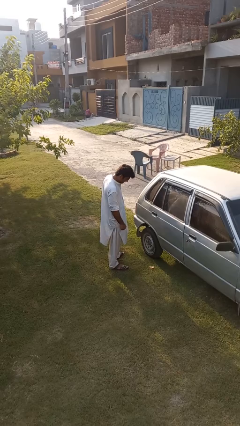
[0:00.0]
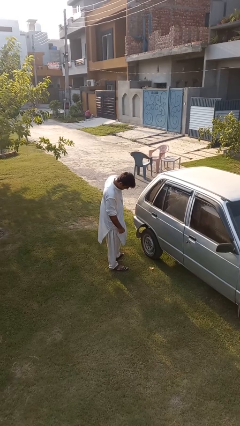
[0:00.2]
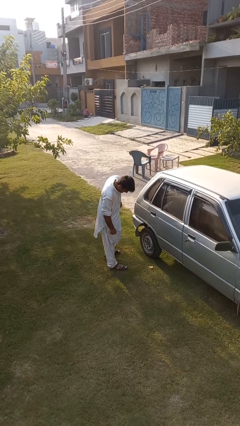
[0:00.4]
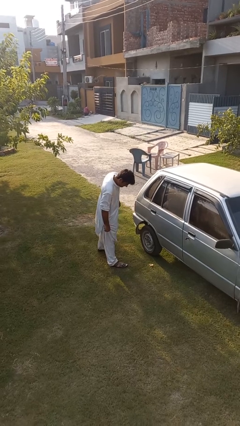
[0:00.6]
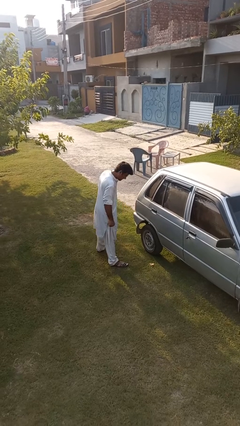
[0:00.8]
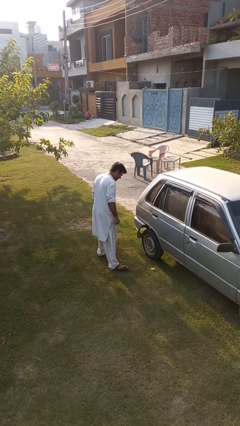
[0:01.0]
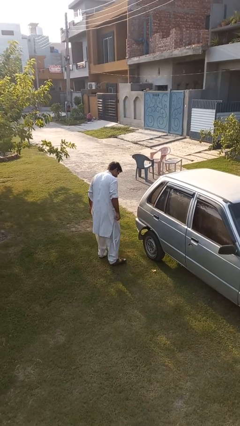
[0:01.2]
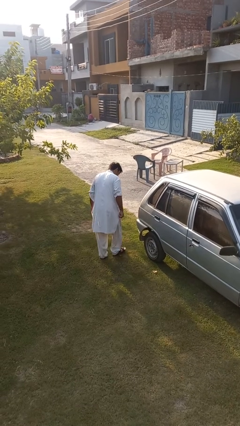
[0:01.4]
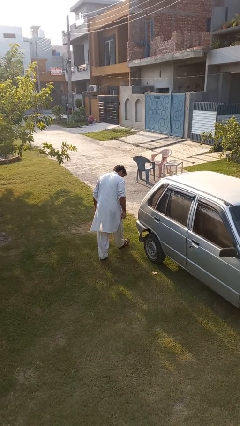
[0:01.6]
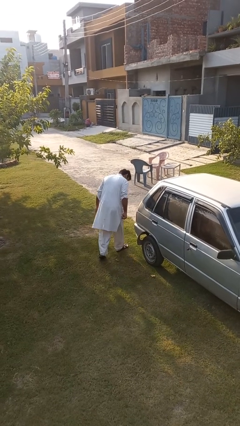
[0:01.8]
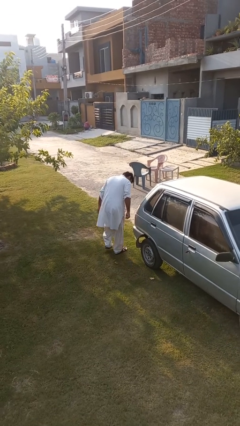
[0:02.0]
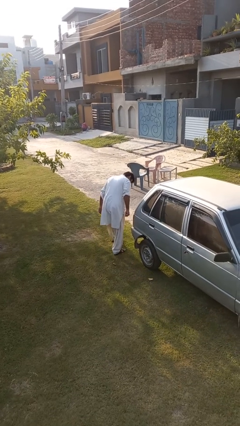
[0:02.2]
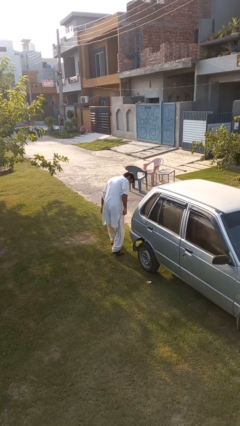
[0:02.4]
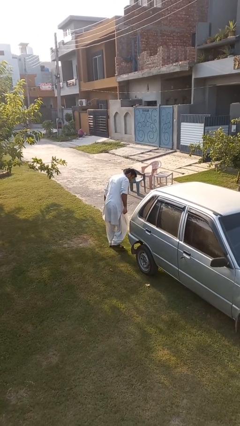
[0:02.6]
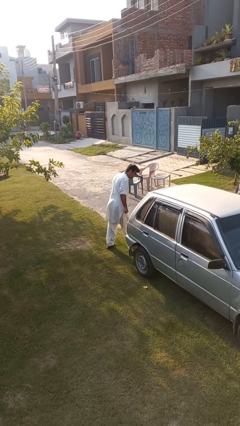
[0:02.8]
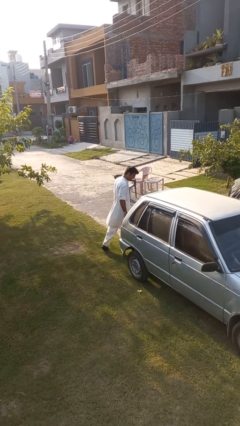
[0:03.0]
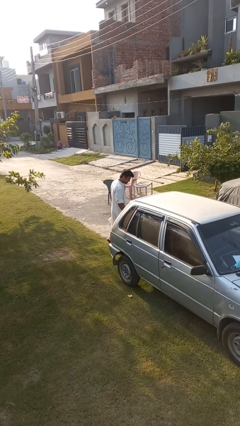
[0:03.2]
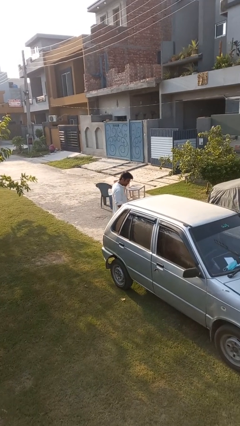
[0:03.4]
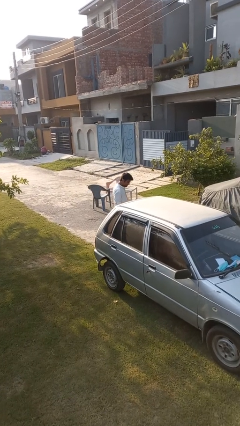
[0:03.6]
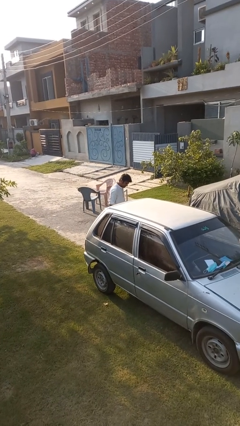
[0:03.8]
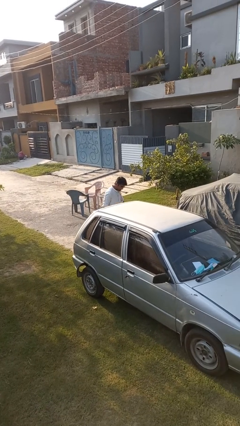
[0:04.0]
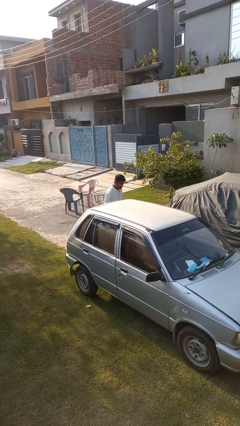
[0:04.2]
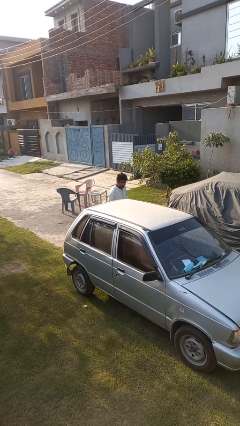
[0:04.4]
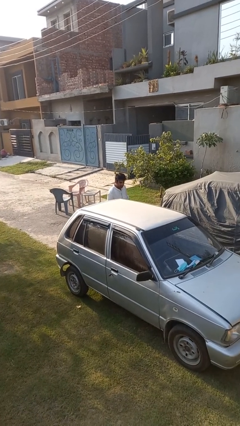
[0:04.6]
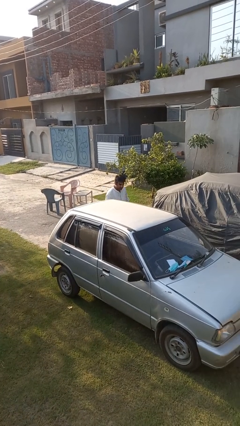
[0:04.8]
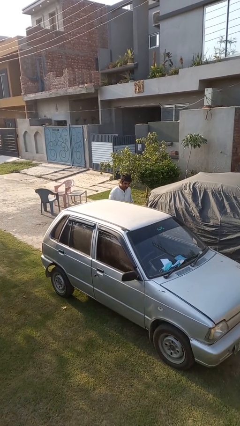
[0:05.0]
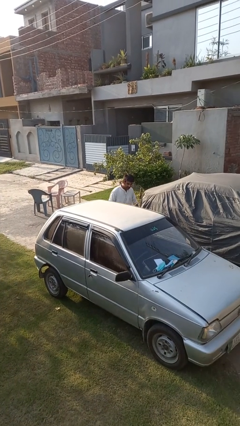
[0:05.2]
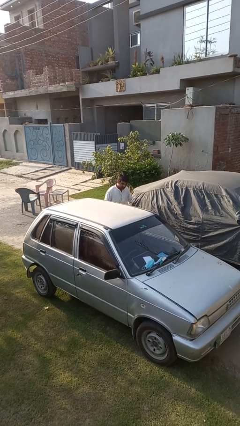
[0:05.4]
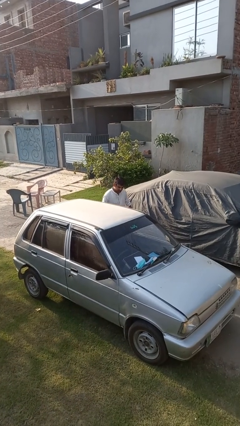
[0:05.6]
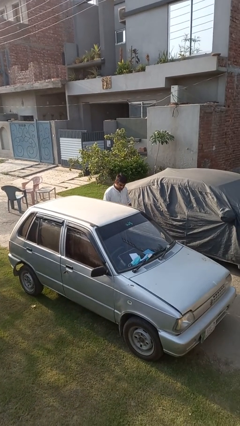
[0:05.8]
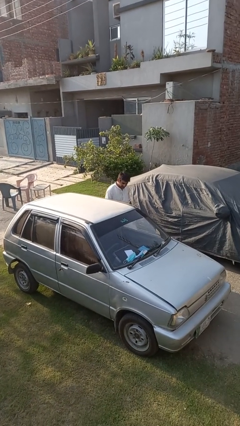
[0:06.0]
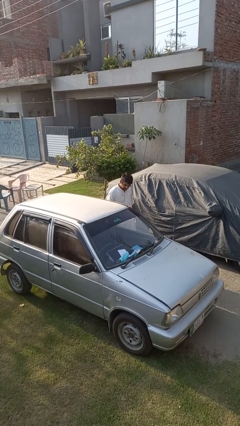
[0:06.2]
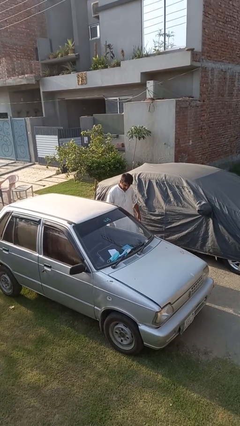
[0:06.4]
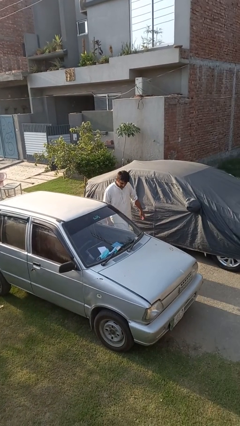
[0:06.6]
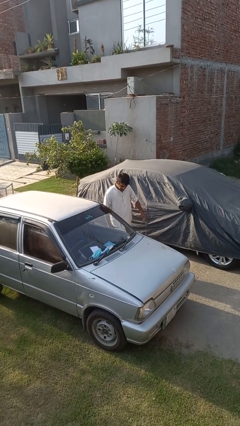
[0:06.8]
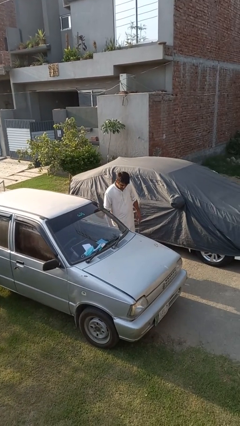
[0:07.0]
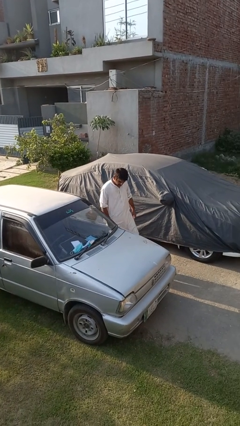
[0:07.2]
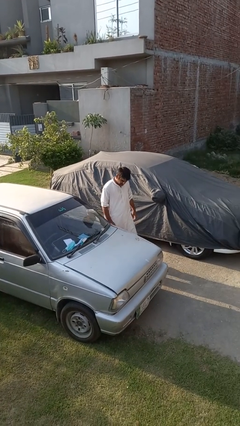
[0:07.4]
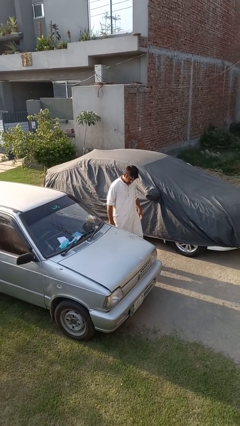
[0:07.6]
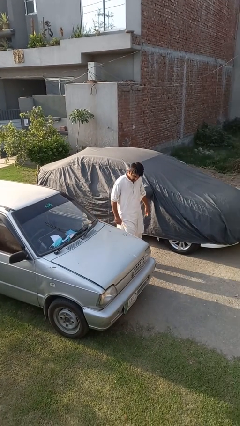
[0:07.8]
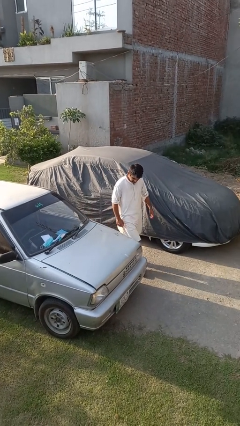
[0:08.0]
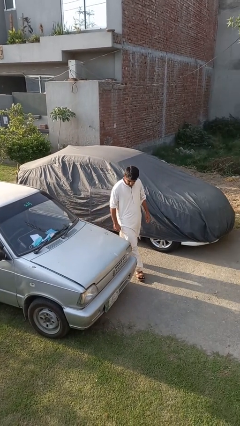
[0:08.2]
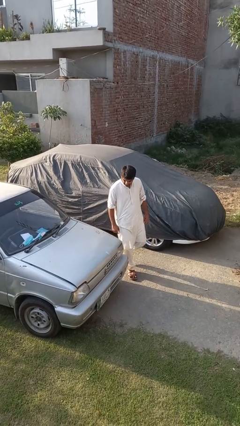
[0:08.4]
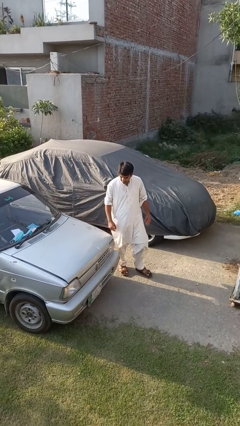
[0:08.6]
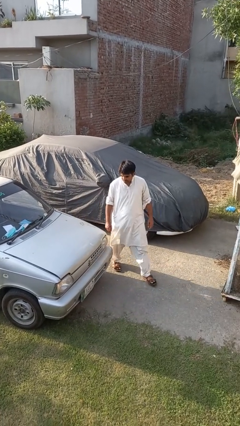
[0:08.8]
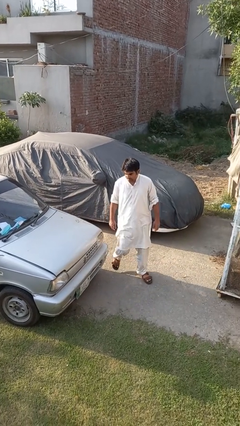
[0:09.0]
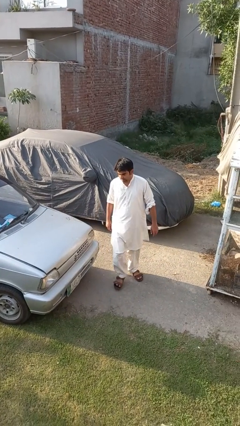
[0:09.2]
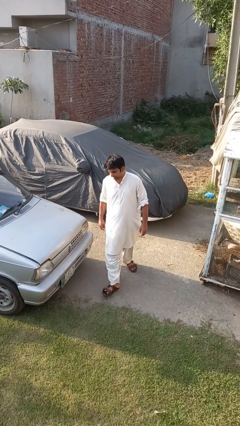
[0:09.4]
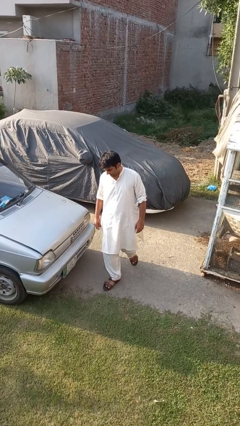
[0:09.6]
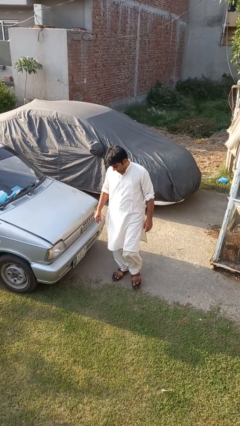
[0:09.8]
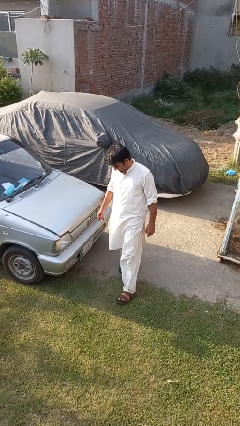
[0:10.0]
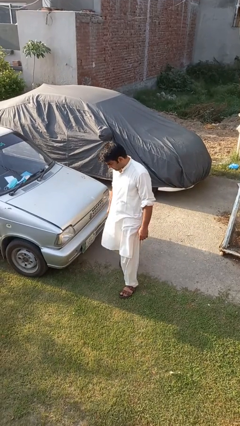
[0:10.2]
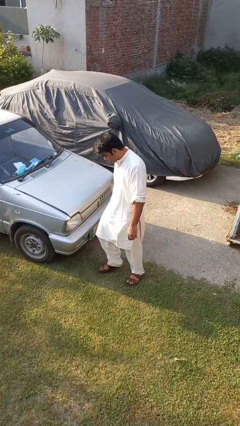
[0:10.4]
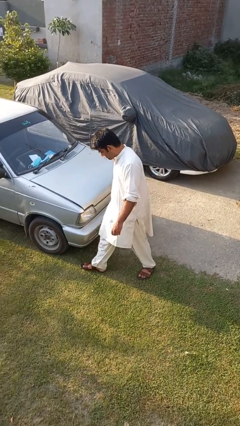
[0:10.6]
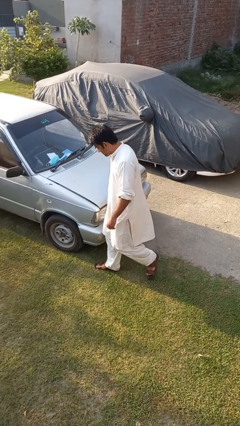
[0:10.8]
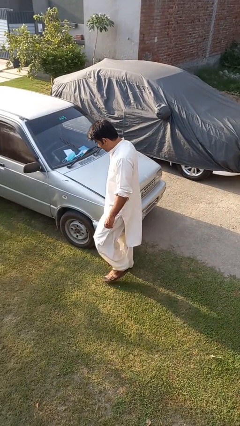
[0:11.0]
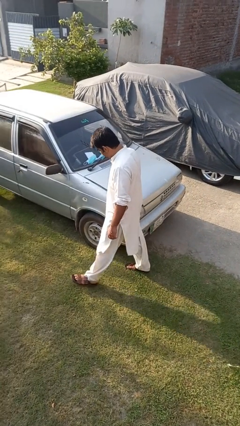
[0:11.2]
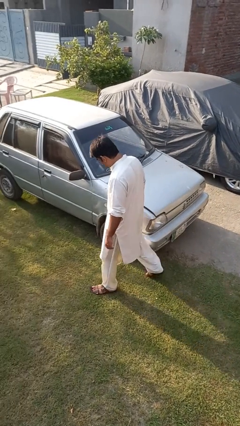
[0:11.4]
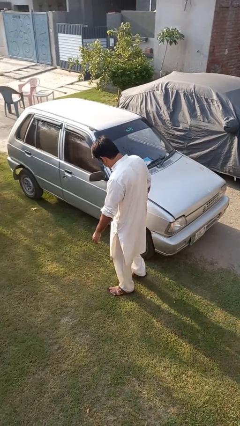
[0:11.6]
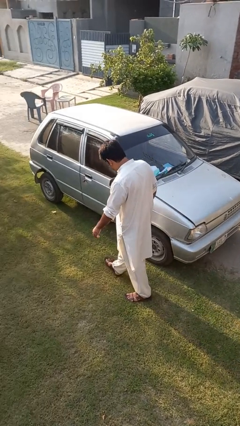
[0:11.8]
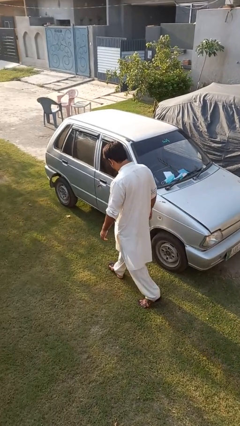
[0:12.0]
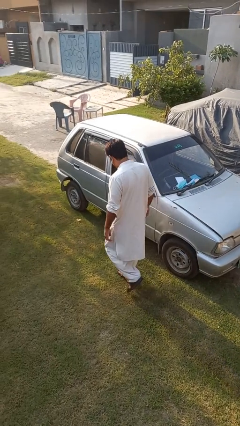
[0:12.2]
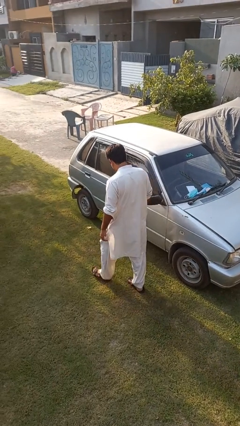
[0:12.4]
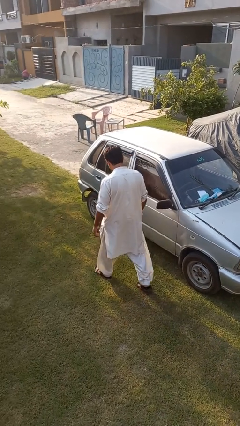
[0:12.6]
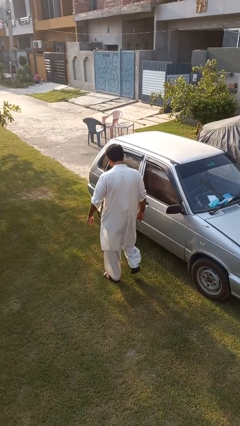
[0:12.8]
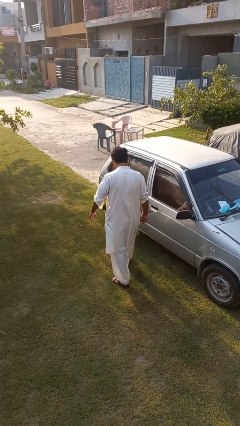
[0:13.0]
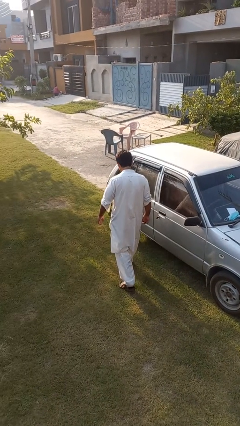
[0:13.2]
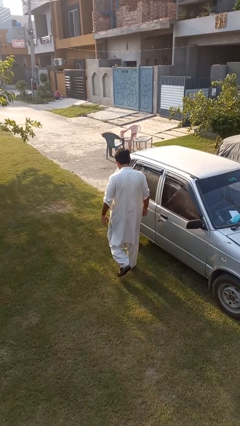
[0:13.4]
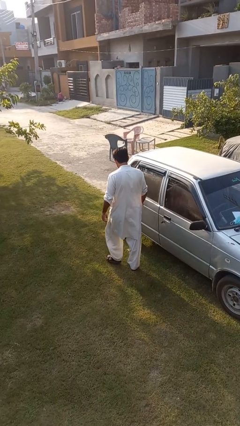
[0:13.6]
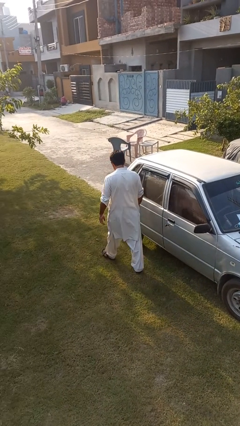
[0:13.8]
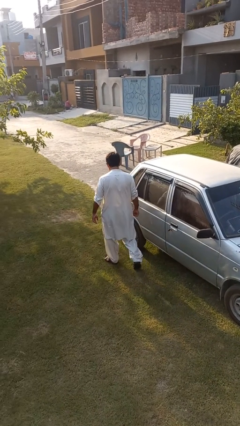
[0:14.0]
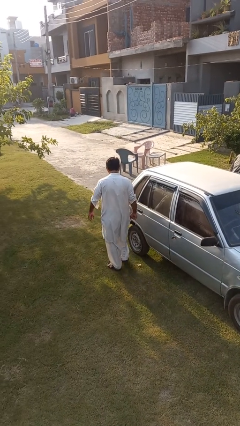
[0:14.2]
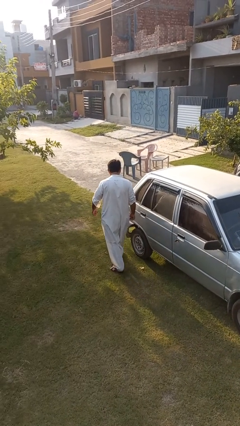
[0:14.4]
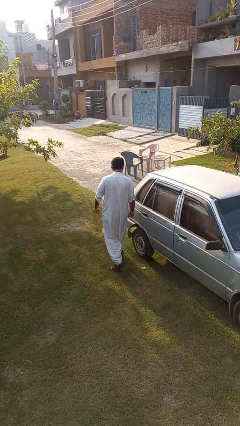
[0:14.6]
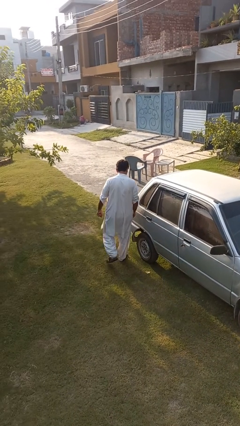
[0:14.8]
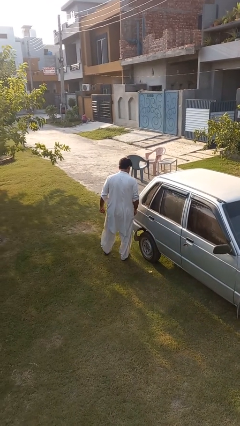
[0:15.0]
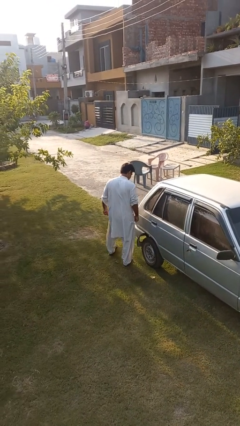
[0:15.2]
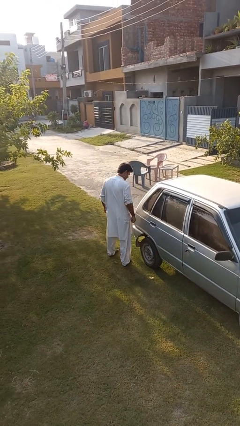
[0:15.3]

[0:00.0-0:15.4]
person walks around car

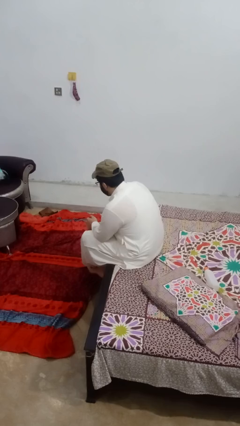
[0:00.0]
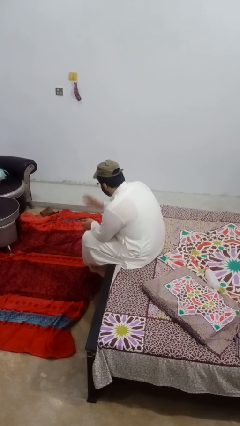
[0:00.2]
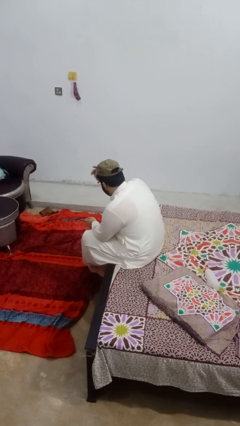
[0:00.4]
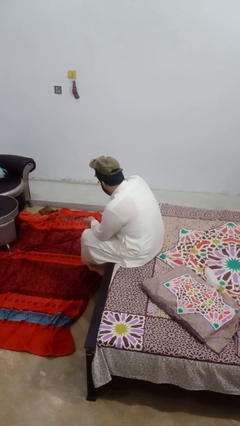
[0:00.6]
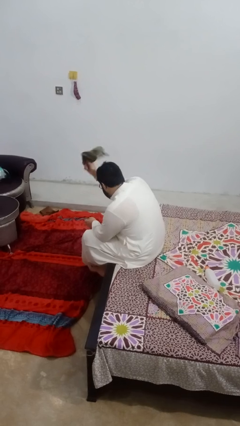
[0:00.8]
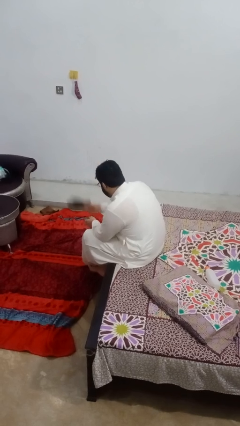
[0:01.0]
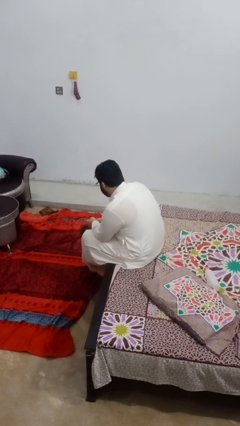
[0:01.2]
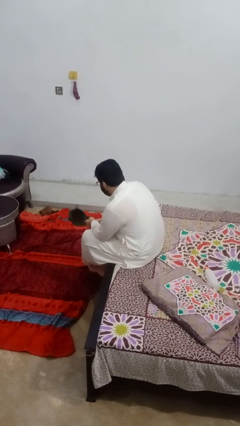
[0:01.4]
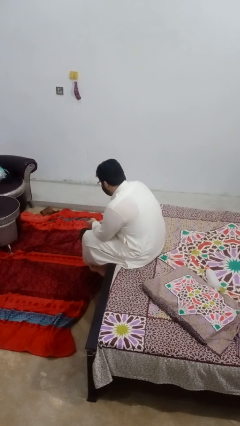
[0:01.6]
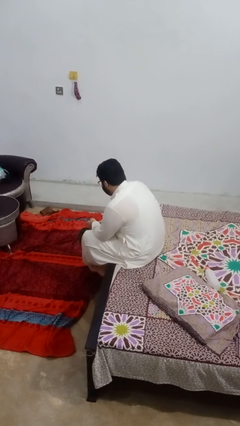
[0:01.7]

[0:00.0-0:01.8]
person takes off hat

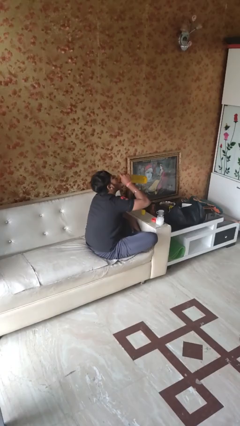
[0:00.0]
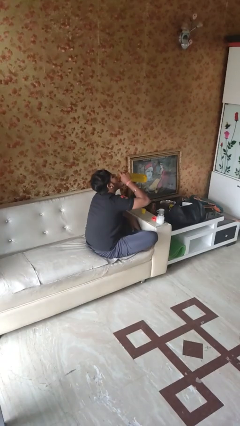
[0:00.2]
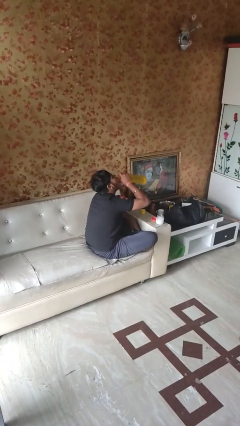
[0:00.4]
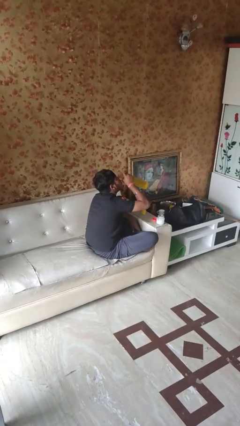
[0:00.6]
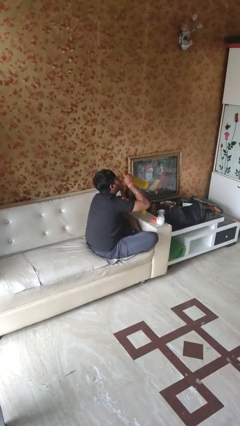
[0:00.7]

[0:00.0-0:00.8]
person drinks from cup
